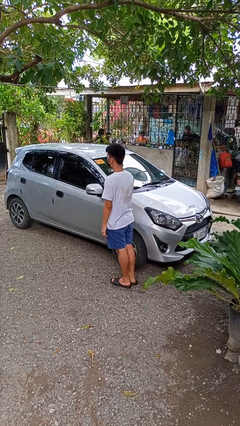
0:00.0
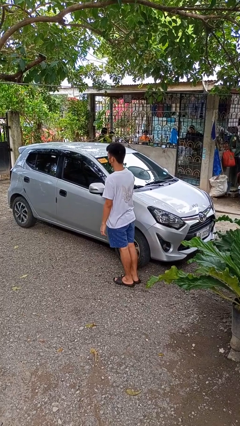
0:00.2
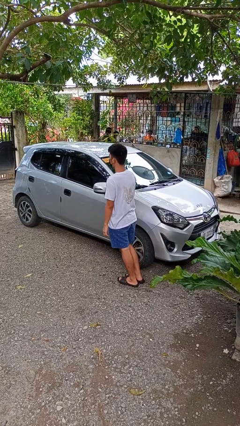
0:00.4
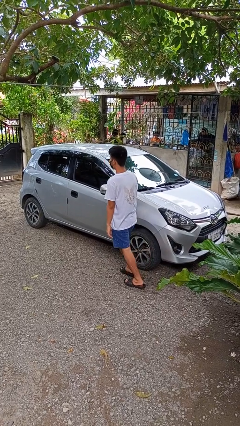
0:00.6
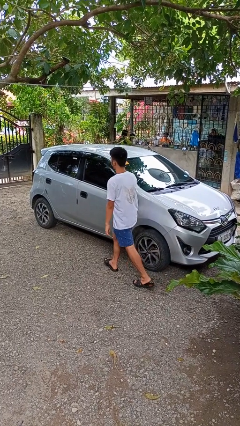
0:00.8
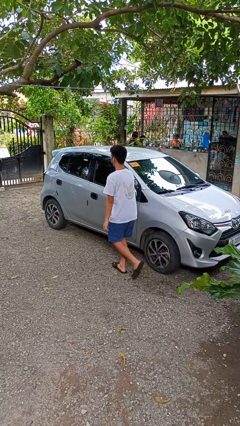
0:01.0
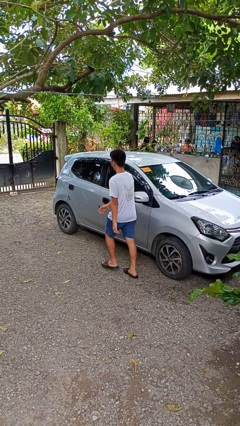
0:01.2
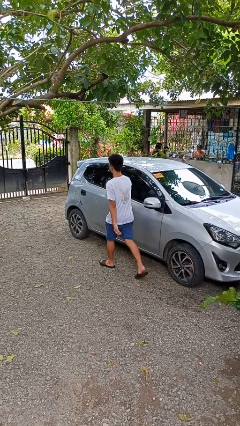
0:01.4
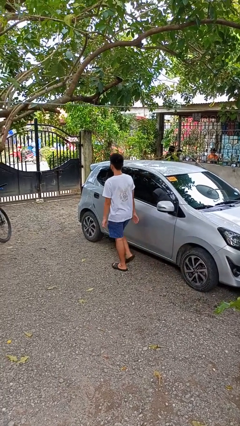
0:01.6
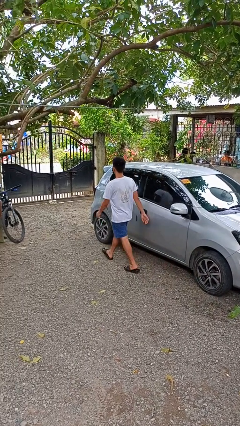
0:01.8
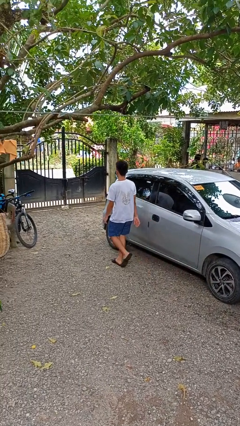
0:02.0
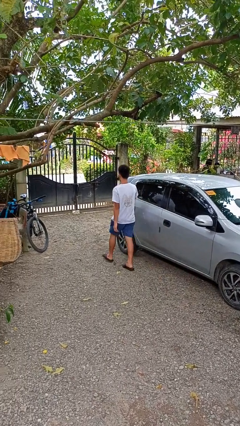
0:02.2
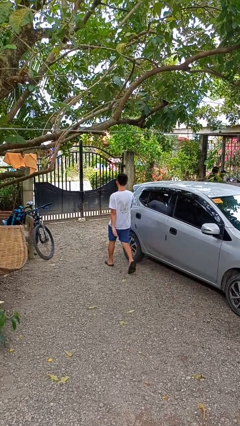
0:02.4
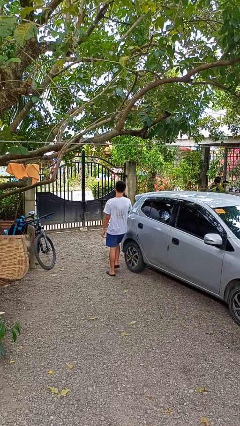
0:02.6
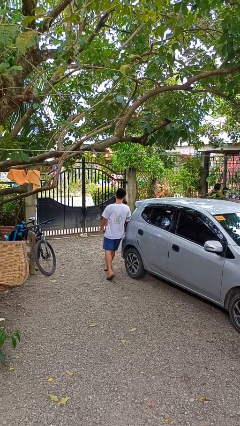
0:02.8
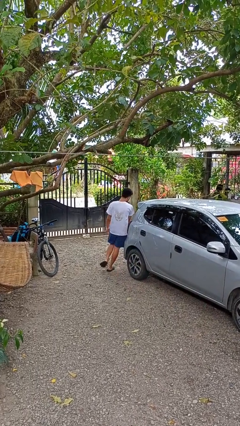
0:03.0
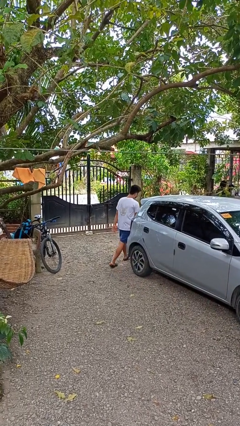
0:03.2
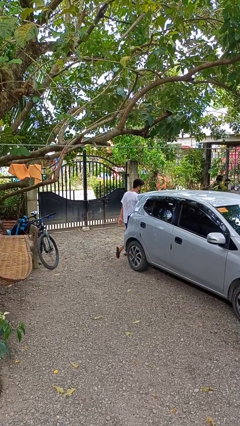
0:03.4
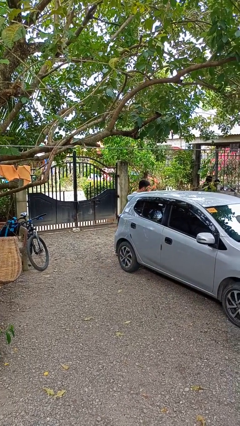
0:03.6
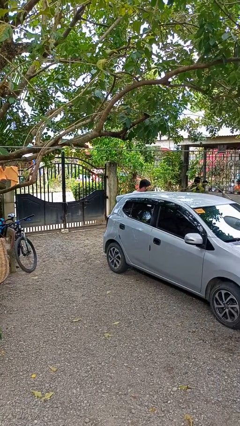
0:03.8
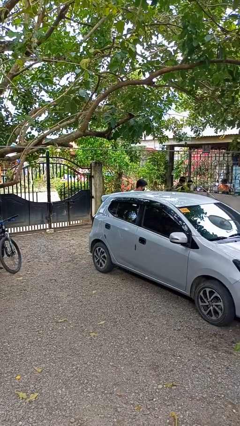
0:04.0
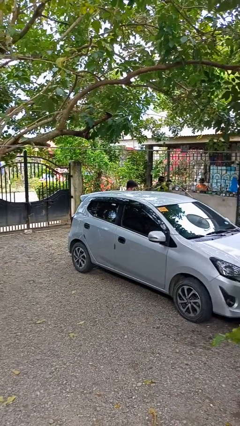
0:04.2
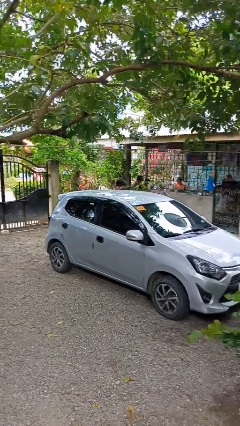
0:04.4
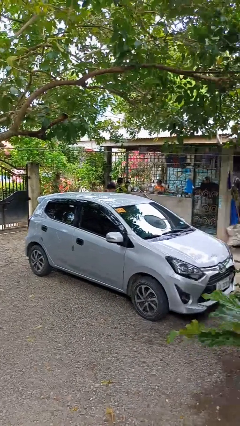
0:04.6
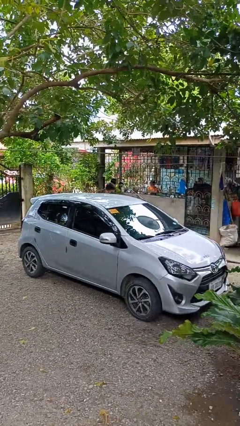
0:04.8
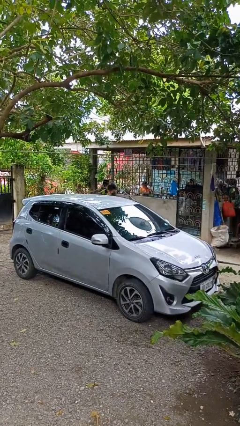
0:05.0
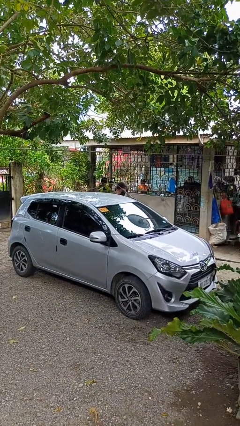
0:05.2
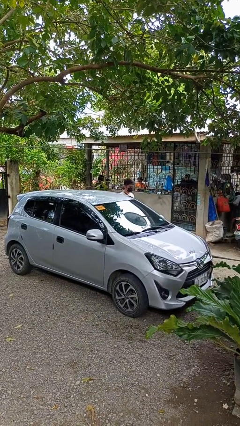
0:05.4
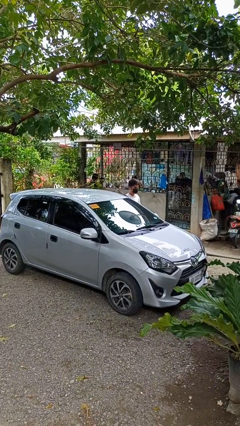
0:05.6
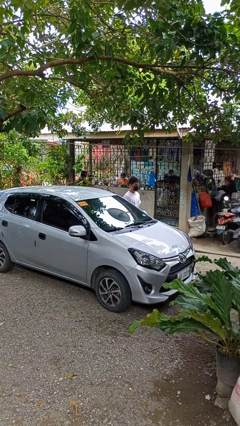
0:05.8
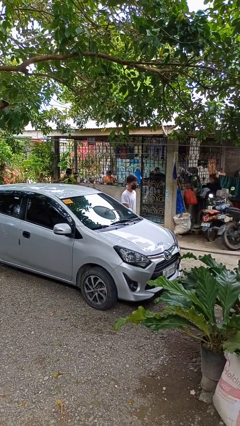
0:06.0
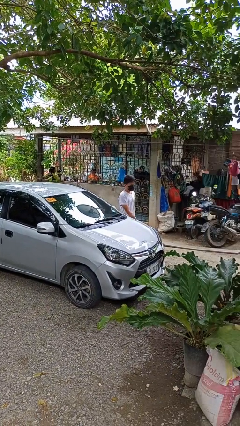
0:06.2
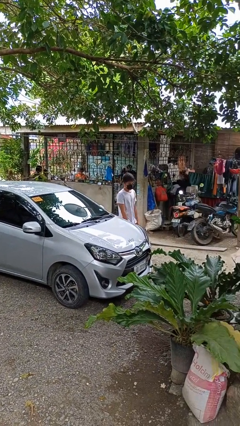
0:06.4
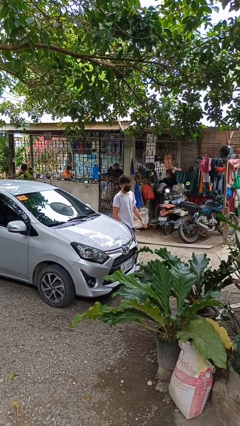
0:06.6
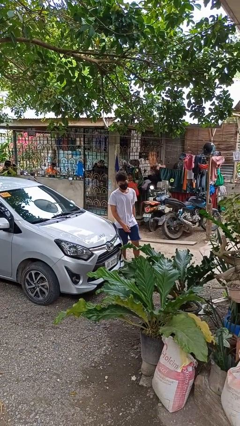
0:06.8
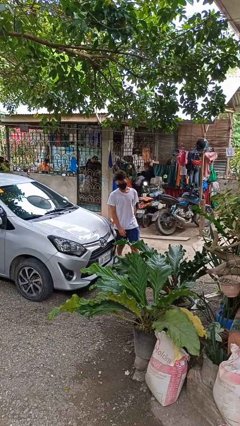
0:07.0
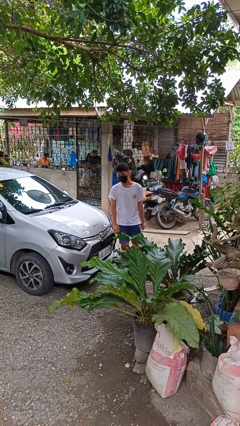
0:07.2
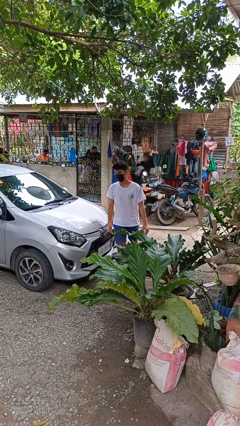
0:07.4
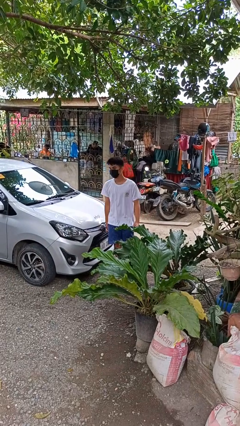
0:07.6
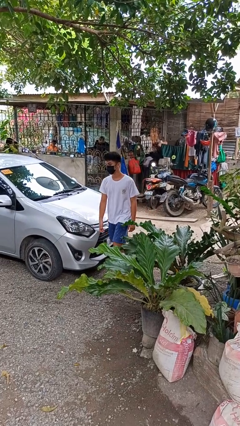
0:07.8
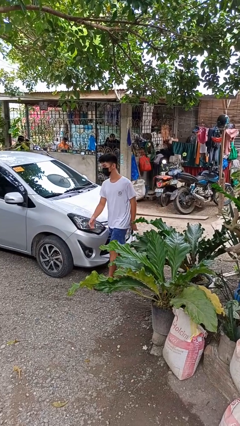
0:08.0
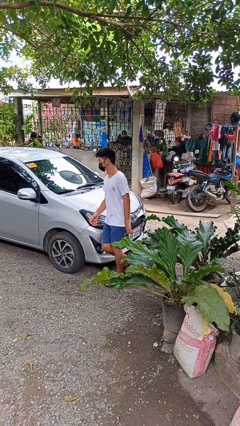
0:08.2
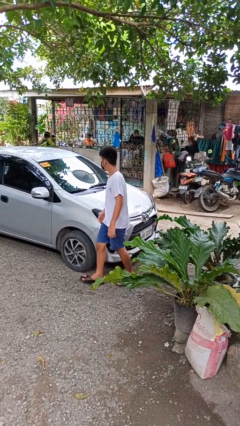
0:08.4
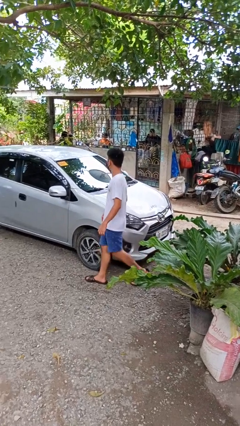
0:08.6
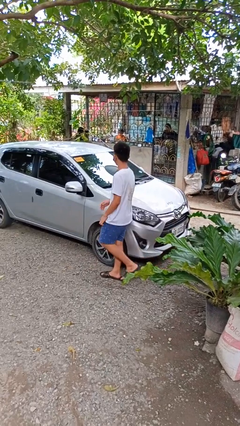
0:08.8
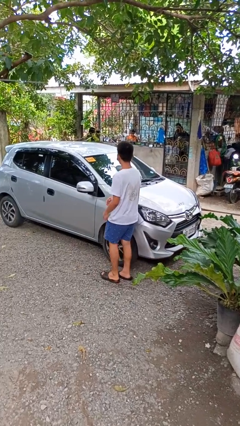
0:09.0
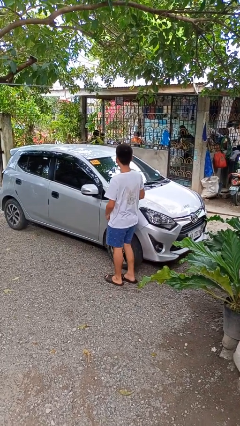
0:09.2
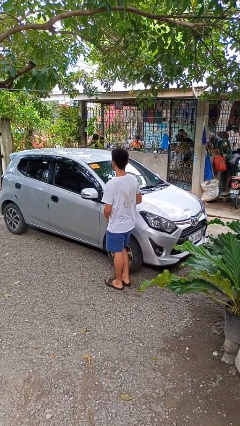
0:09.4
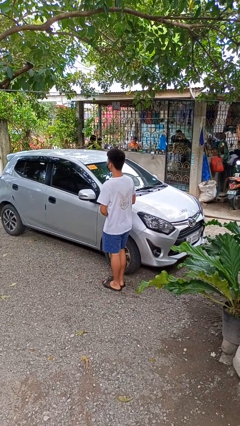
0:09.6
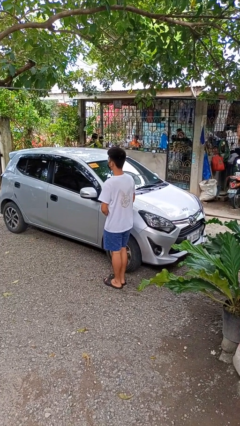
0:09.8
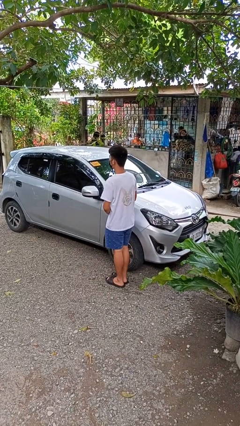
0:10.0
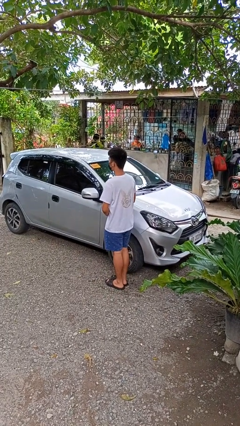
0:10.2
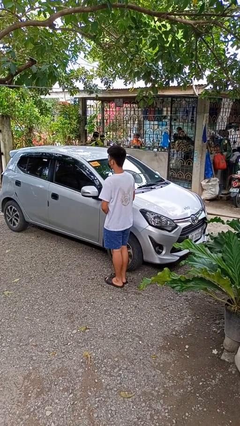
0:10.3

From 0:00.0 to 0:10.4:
person walks around car

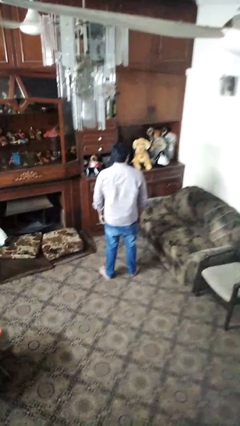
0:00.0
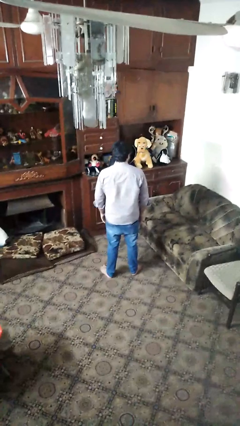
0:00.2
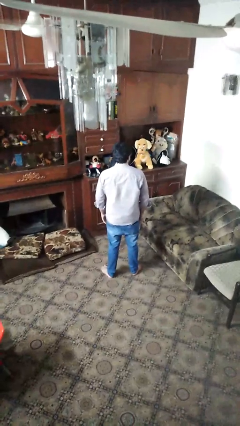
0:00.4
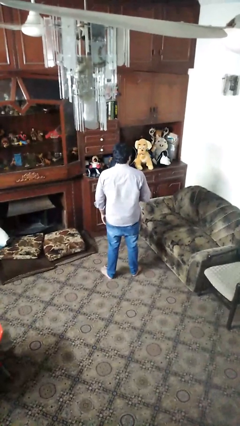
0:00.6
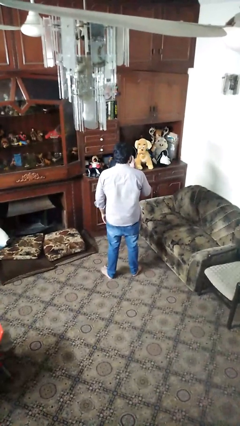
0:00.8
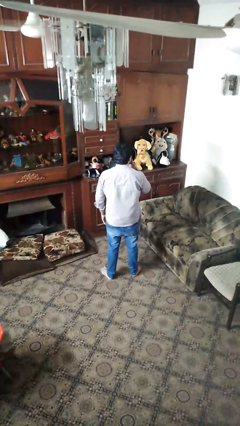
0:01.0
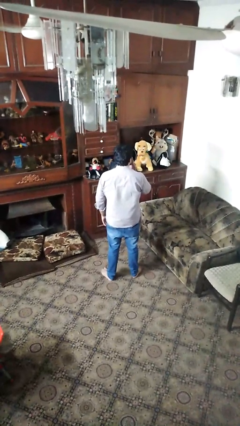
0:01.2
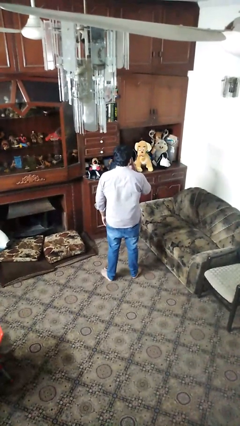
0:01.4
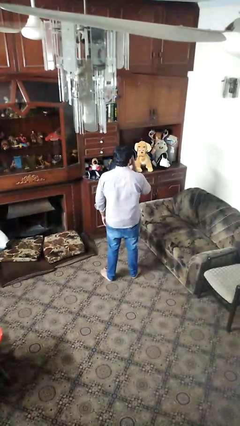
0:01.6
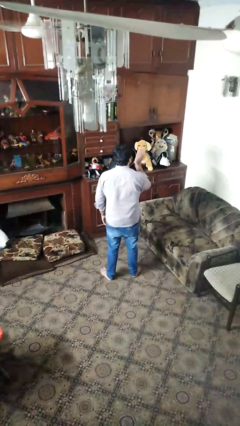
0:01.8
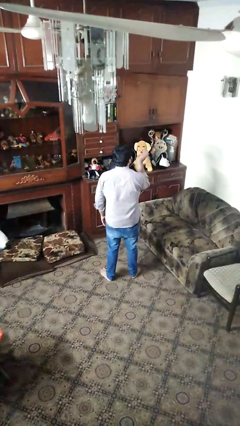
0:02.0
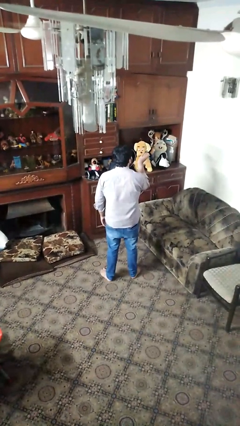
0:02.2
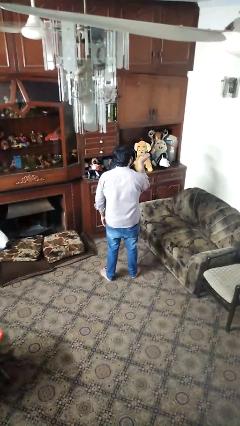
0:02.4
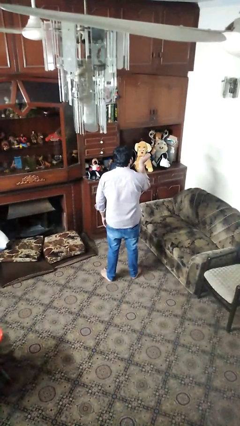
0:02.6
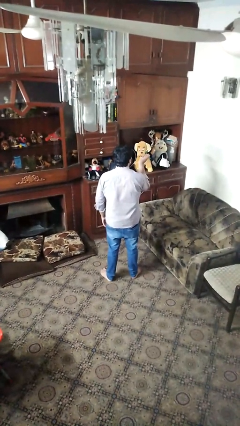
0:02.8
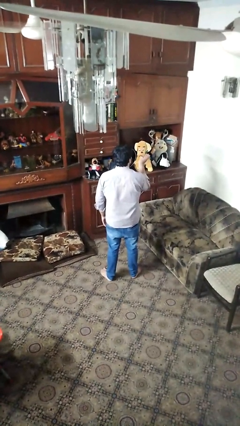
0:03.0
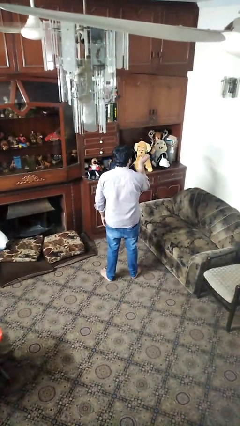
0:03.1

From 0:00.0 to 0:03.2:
person gestures blow kiss

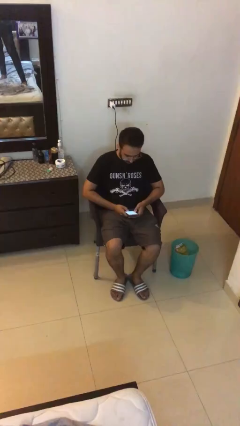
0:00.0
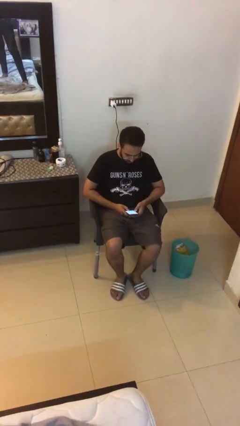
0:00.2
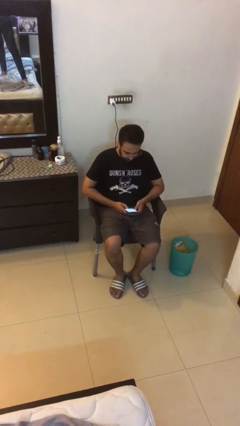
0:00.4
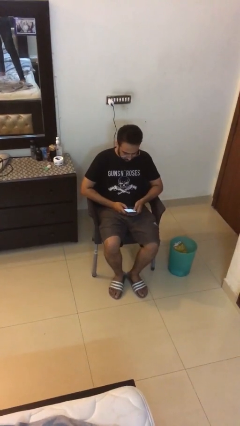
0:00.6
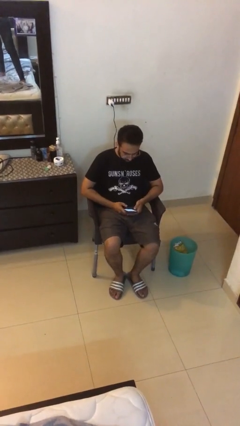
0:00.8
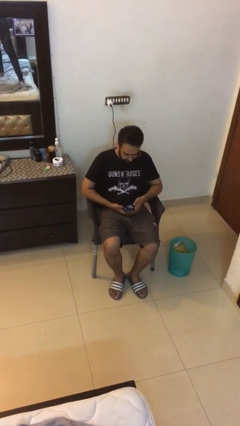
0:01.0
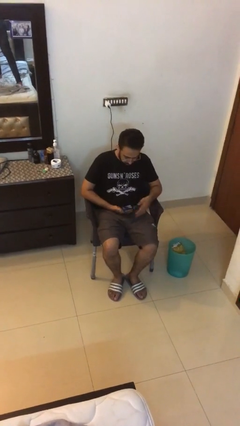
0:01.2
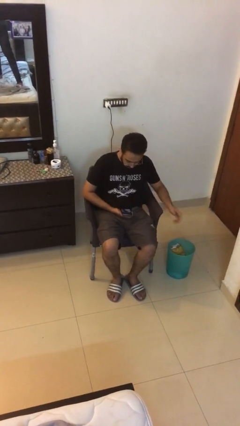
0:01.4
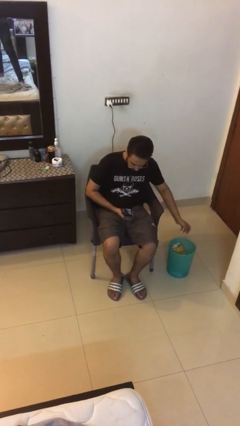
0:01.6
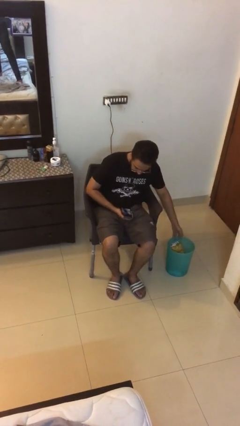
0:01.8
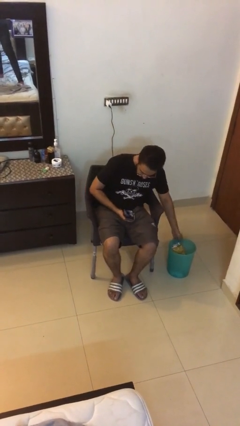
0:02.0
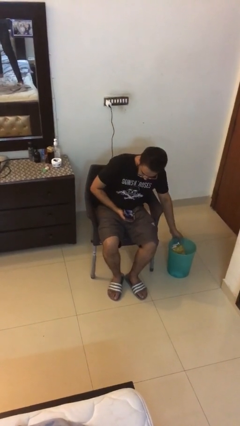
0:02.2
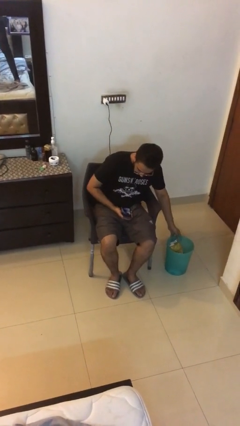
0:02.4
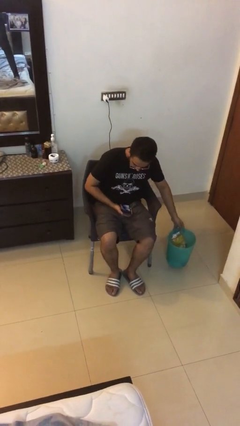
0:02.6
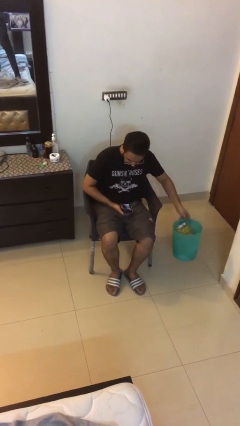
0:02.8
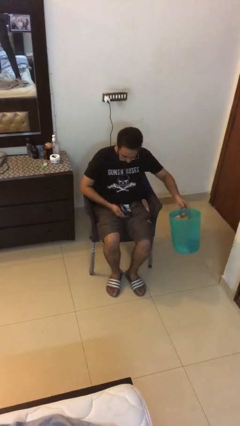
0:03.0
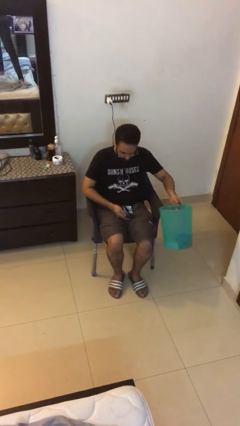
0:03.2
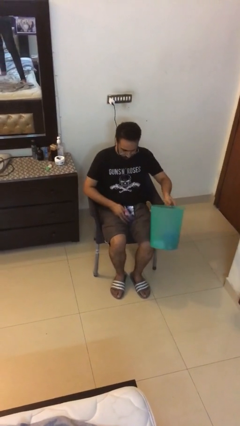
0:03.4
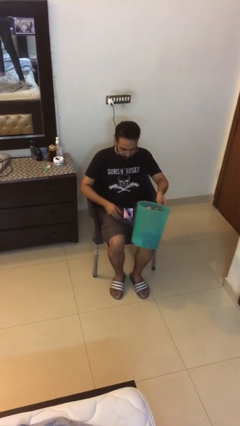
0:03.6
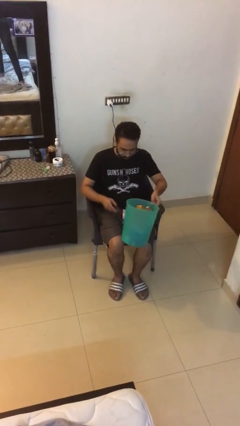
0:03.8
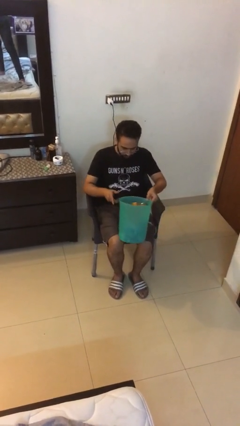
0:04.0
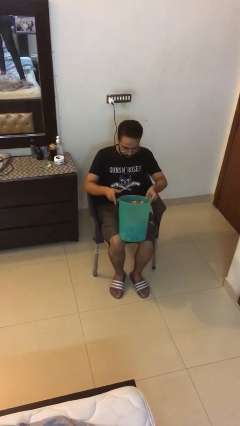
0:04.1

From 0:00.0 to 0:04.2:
person picks up object from floor

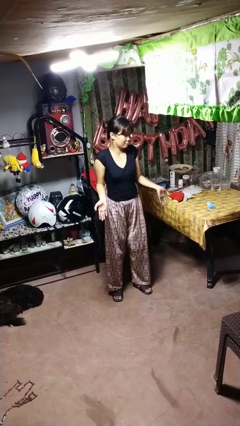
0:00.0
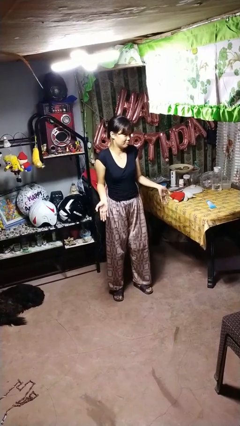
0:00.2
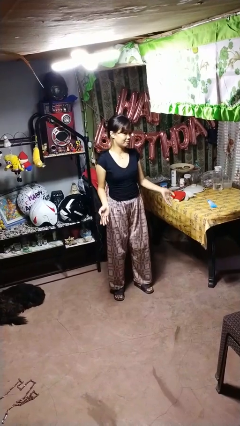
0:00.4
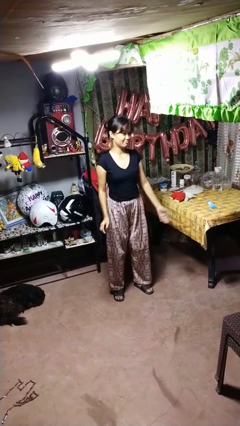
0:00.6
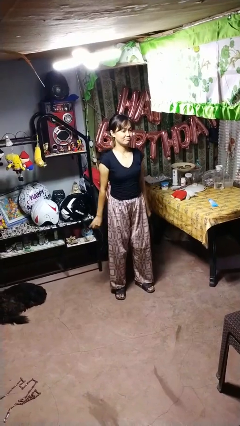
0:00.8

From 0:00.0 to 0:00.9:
person shrugs
